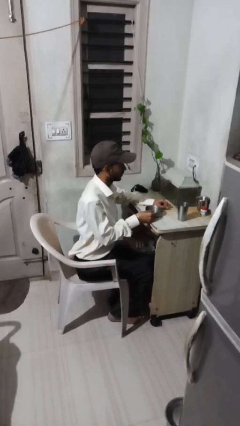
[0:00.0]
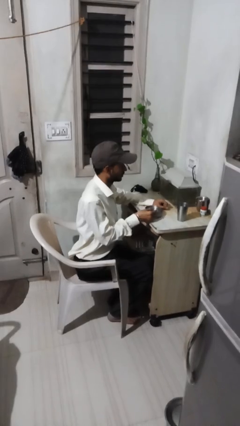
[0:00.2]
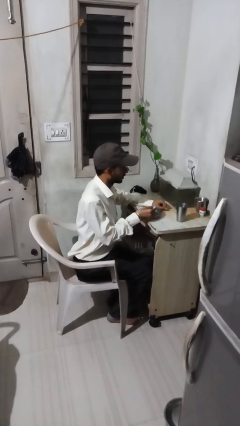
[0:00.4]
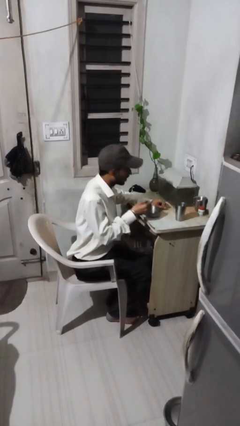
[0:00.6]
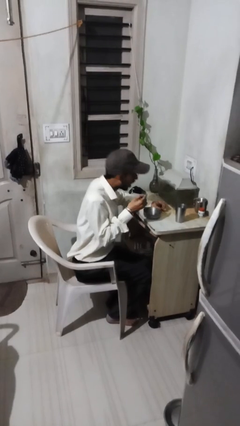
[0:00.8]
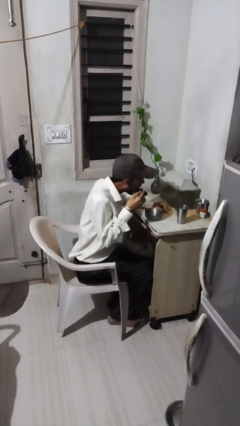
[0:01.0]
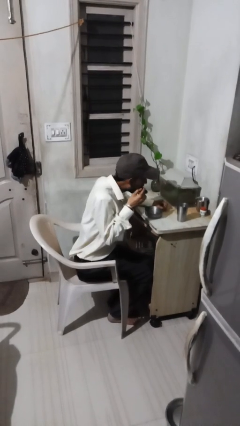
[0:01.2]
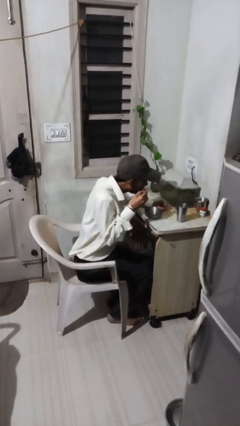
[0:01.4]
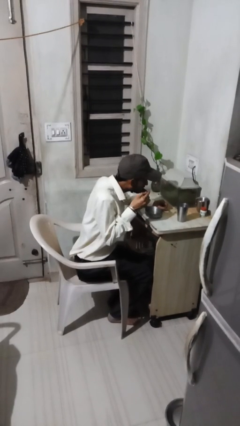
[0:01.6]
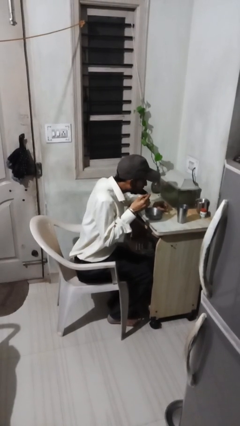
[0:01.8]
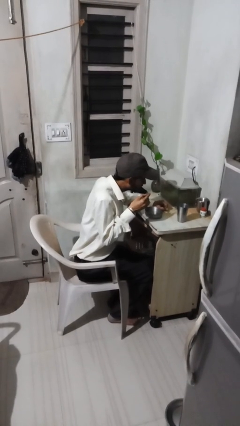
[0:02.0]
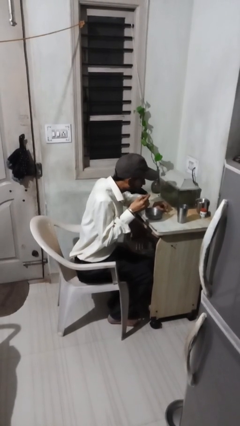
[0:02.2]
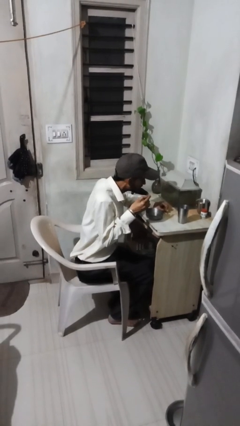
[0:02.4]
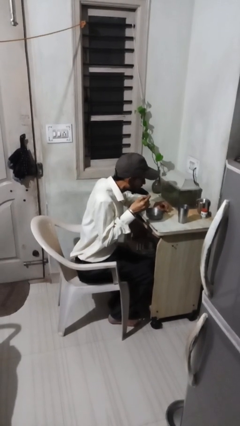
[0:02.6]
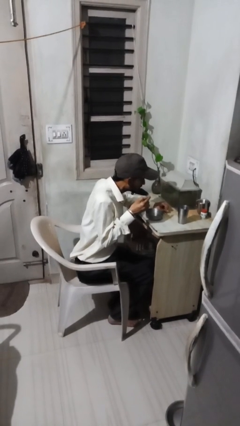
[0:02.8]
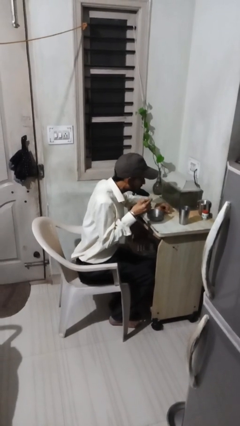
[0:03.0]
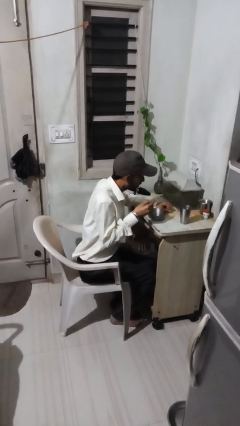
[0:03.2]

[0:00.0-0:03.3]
person eats with utensil

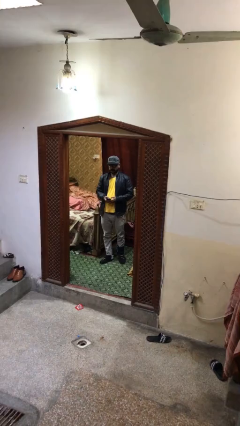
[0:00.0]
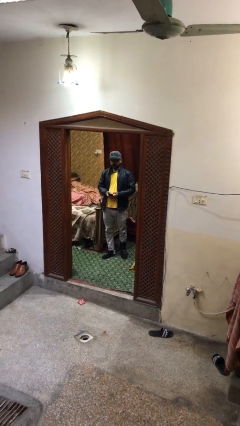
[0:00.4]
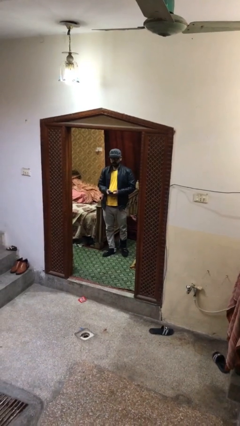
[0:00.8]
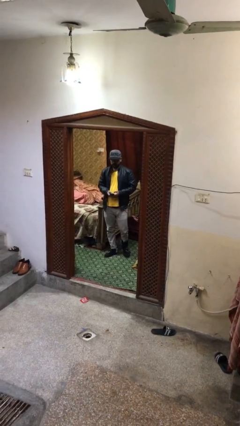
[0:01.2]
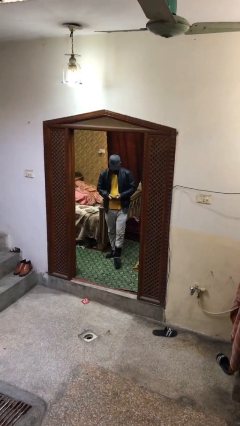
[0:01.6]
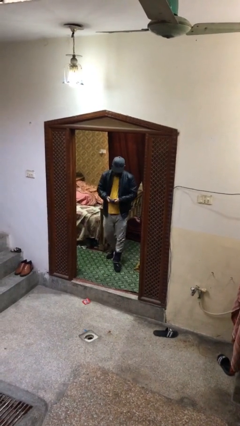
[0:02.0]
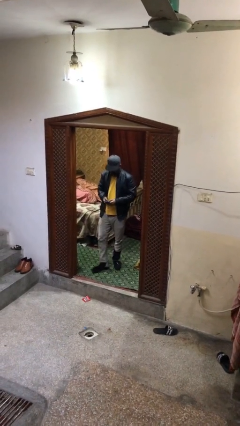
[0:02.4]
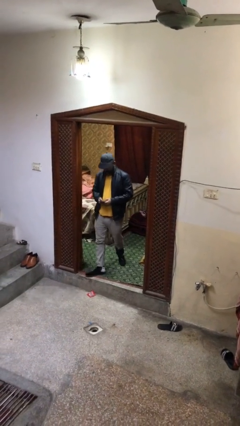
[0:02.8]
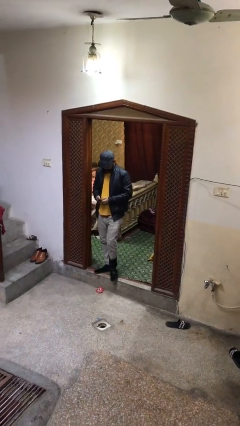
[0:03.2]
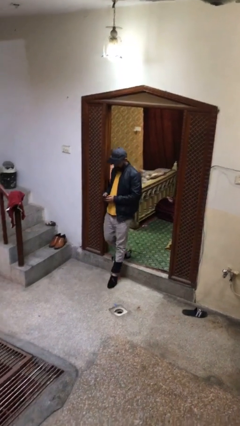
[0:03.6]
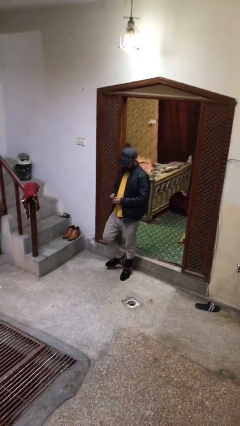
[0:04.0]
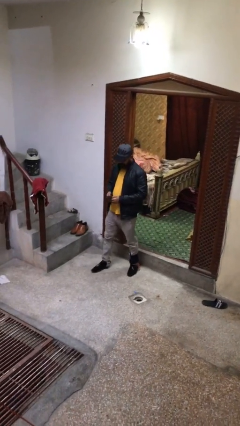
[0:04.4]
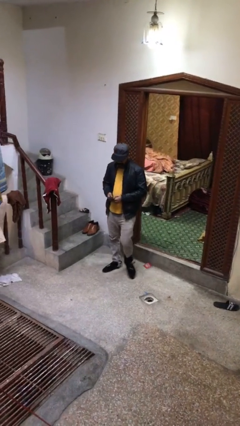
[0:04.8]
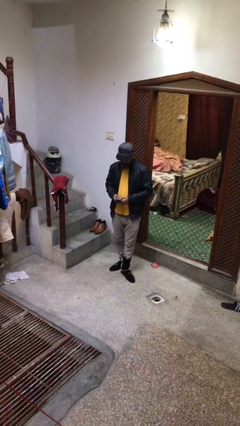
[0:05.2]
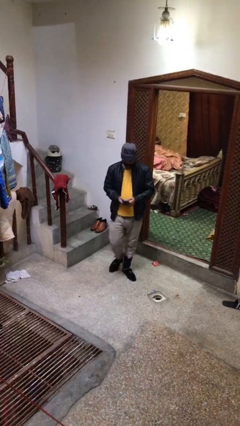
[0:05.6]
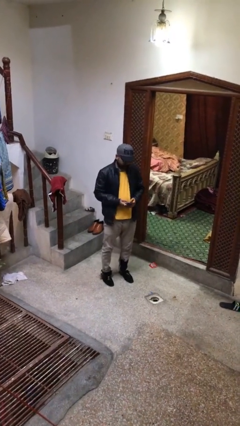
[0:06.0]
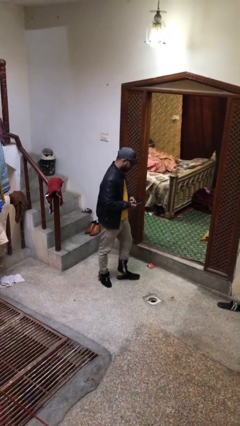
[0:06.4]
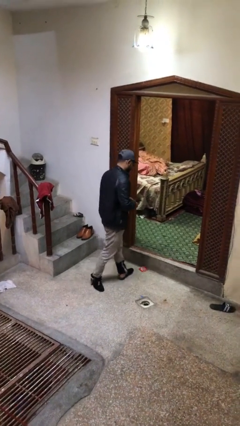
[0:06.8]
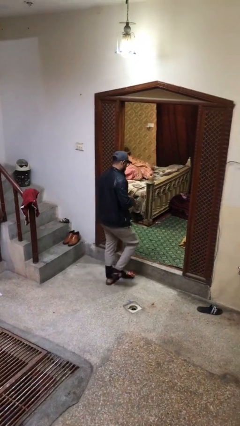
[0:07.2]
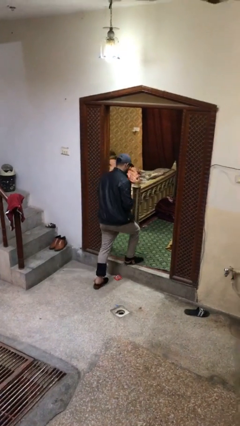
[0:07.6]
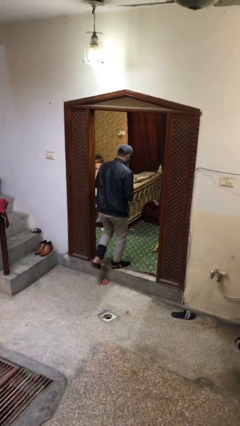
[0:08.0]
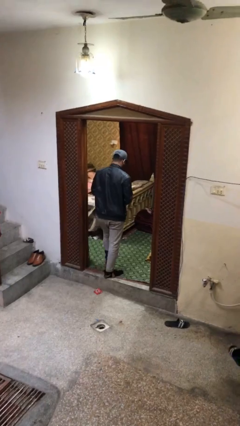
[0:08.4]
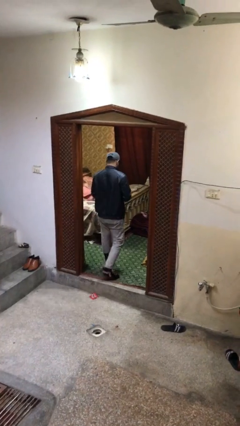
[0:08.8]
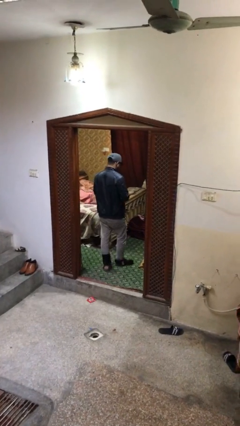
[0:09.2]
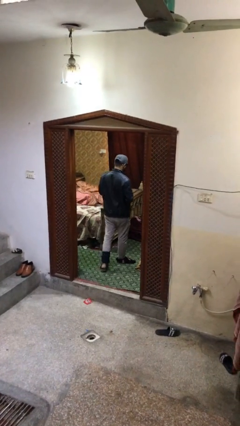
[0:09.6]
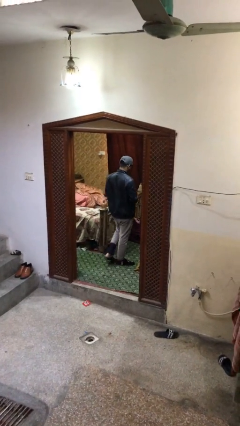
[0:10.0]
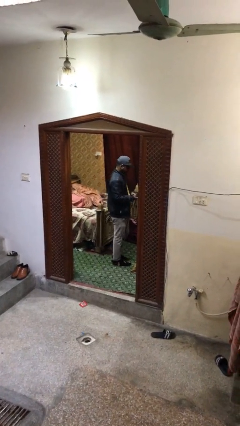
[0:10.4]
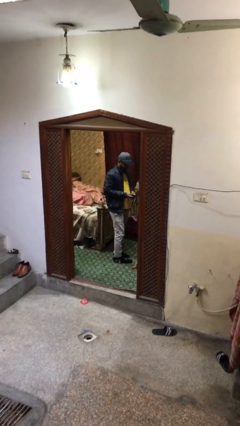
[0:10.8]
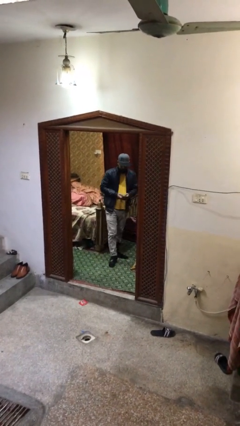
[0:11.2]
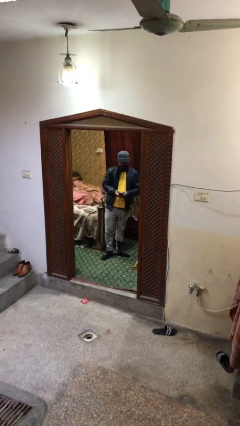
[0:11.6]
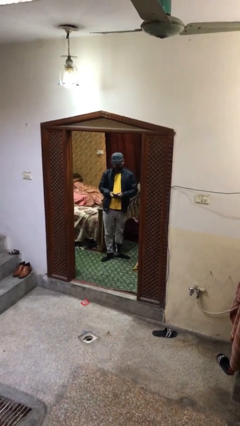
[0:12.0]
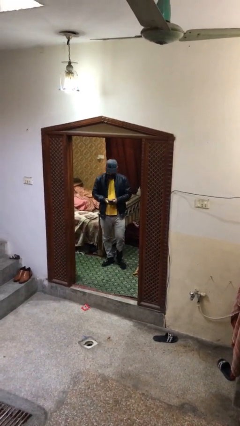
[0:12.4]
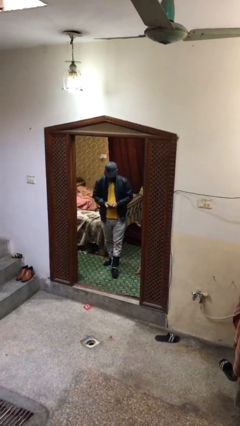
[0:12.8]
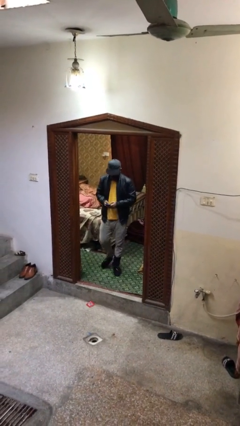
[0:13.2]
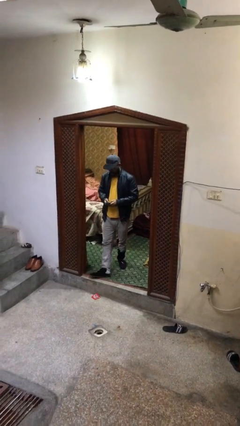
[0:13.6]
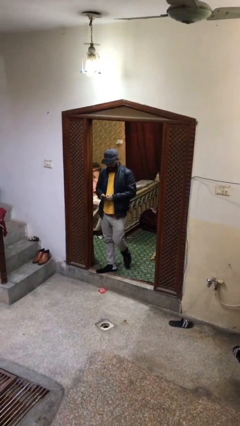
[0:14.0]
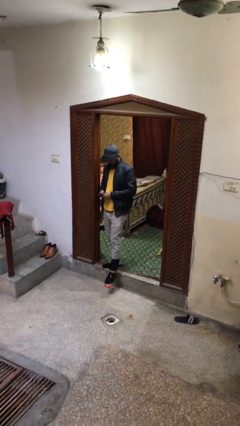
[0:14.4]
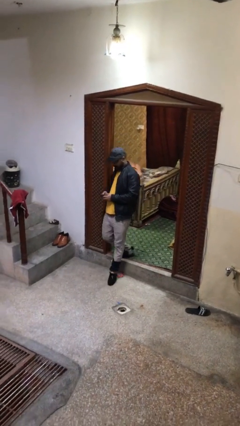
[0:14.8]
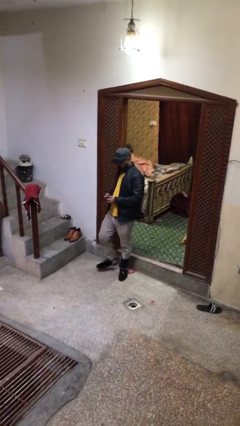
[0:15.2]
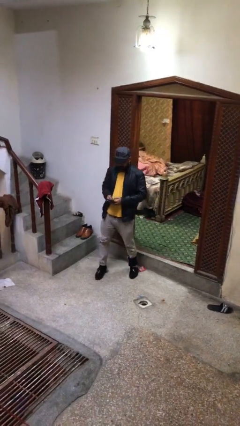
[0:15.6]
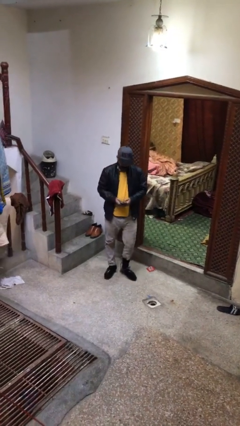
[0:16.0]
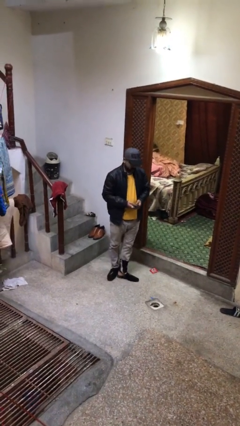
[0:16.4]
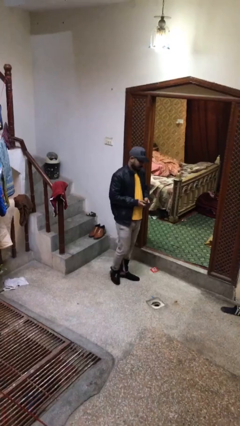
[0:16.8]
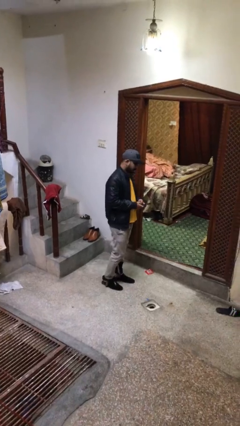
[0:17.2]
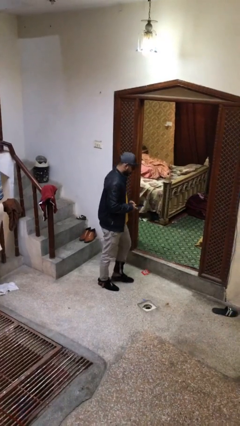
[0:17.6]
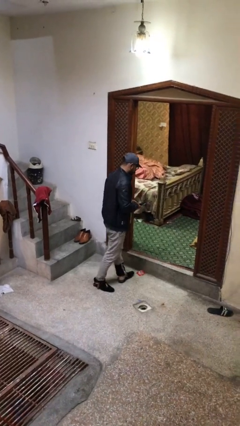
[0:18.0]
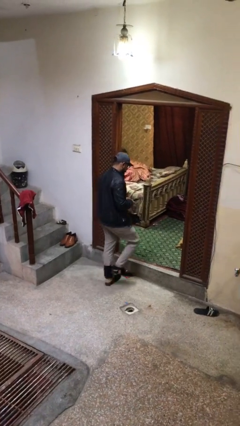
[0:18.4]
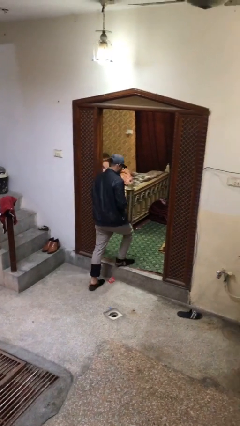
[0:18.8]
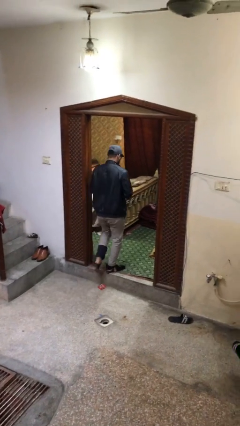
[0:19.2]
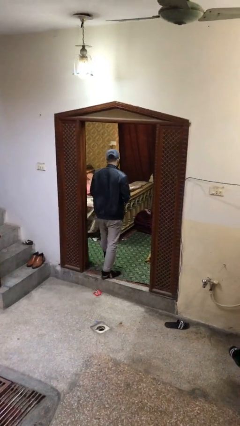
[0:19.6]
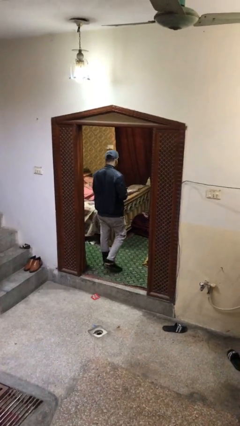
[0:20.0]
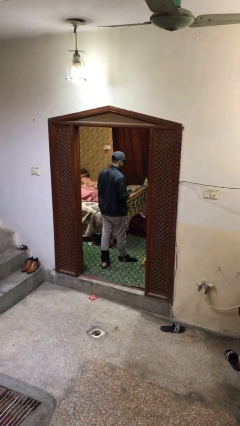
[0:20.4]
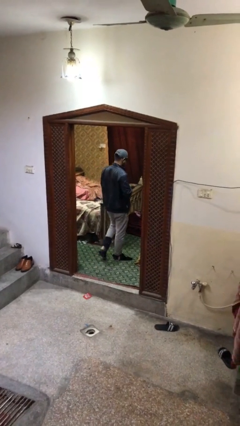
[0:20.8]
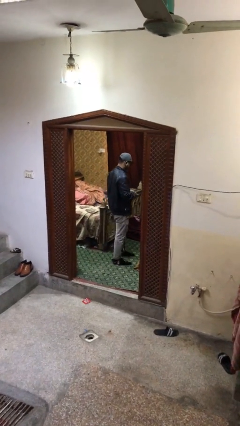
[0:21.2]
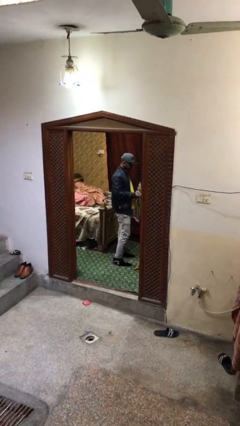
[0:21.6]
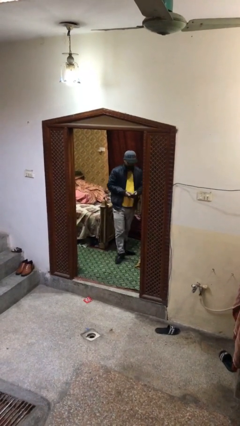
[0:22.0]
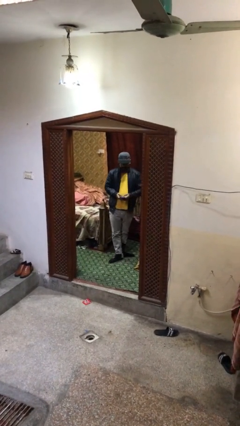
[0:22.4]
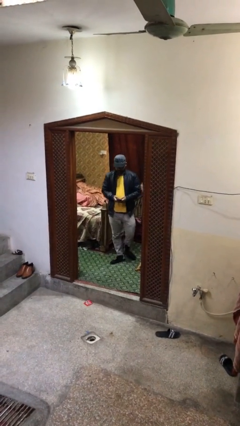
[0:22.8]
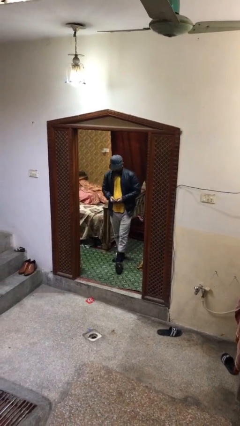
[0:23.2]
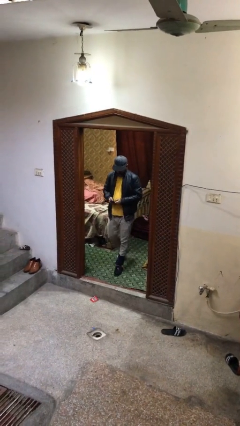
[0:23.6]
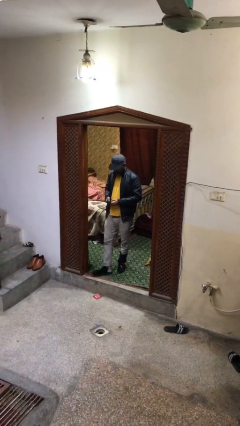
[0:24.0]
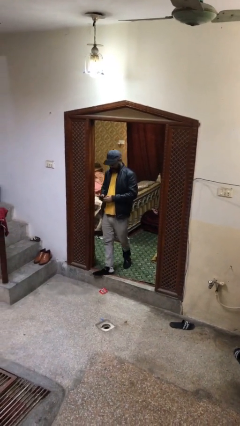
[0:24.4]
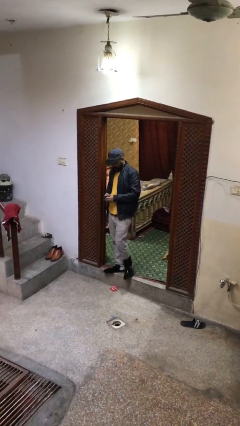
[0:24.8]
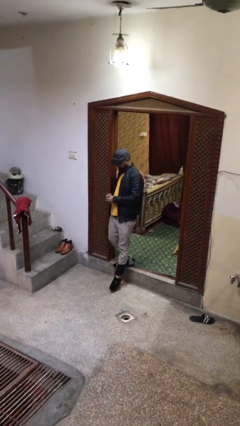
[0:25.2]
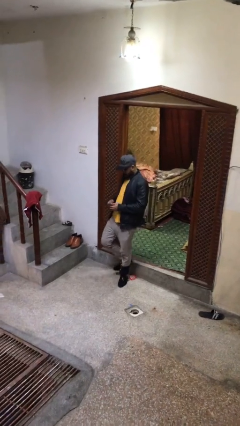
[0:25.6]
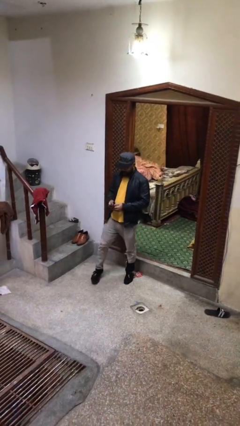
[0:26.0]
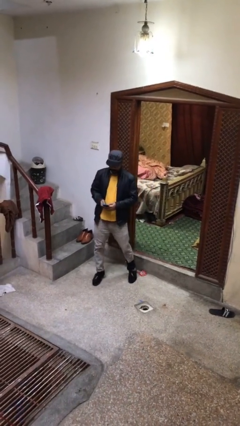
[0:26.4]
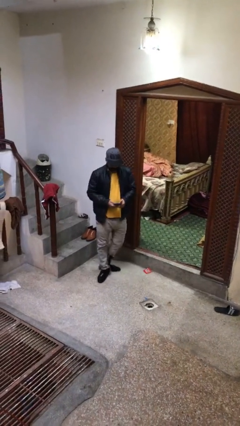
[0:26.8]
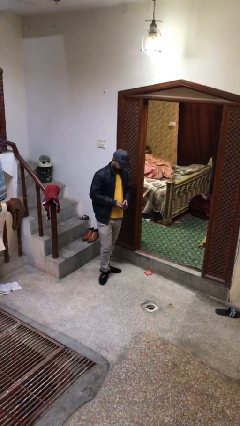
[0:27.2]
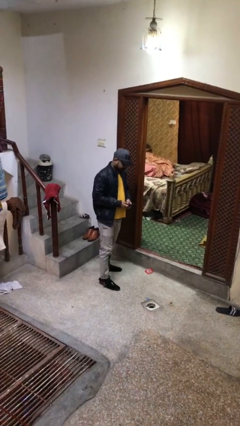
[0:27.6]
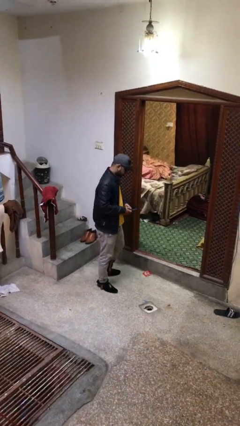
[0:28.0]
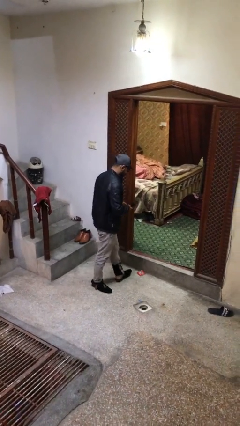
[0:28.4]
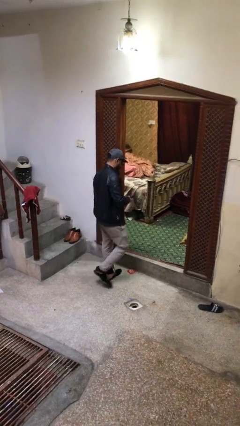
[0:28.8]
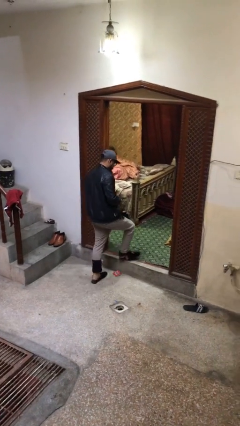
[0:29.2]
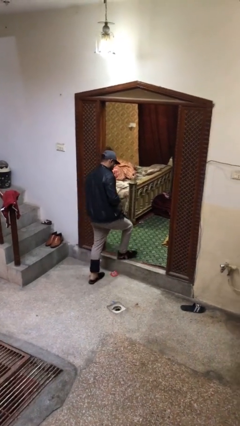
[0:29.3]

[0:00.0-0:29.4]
person texts on phone
